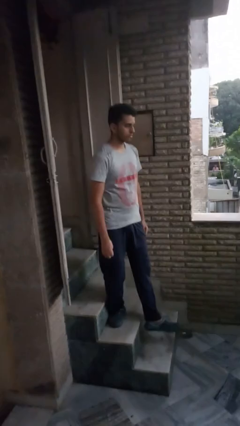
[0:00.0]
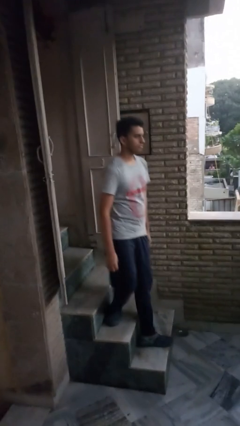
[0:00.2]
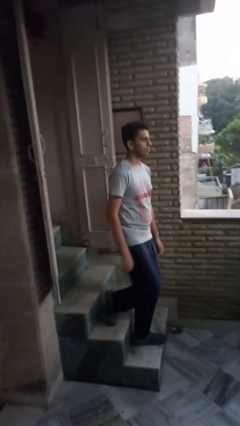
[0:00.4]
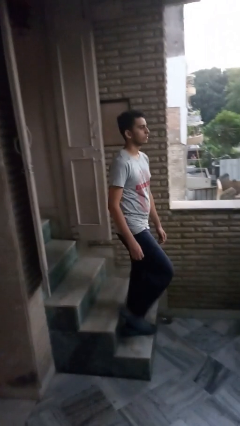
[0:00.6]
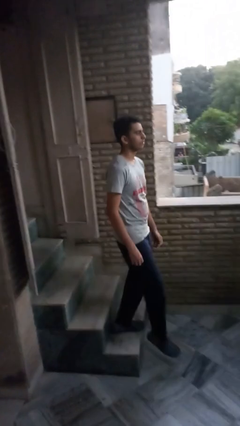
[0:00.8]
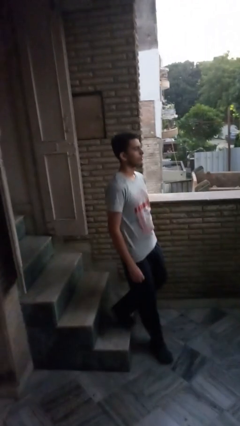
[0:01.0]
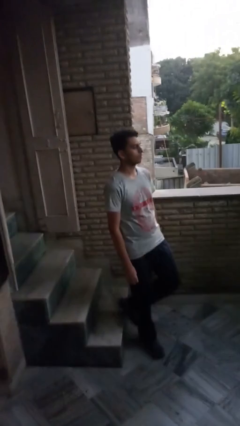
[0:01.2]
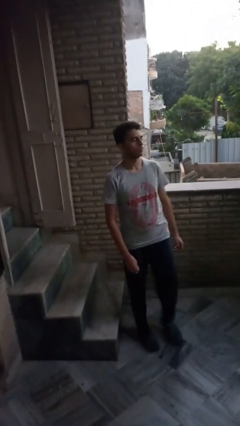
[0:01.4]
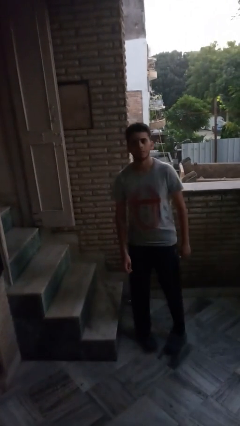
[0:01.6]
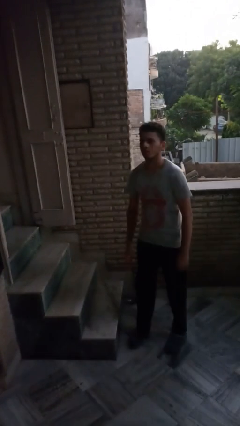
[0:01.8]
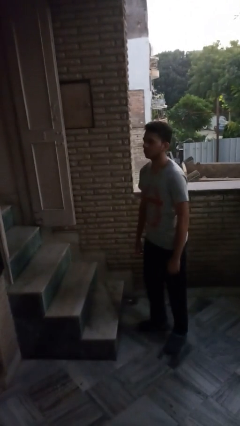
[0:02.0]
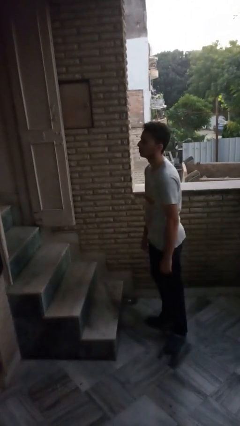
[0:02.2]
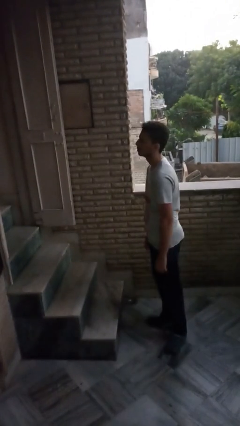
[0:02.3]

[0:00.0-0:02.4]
person climbs down stairs

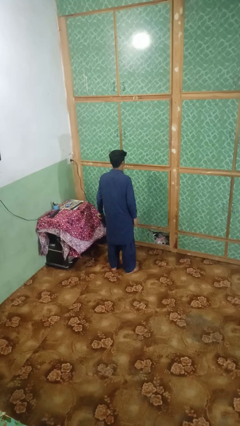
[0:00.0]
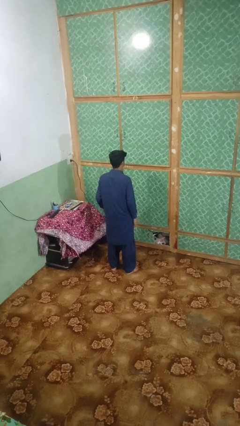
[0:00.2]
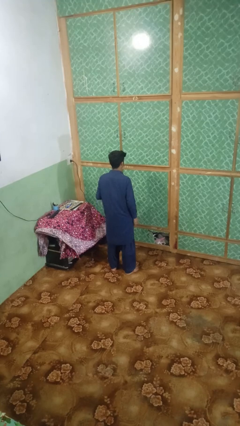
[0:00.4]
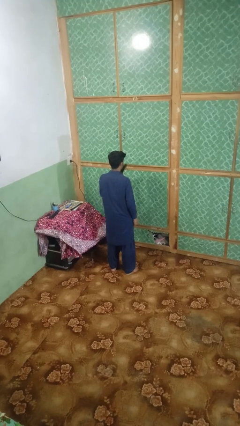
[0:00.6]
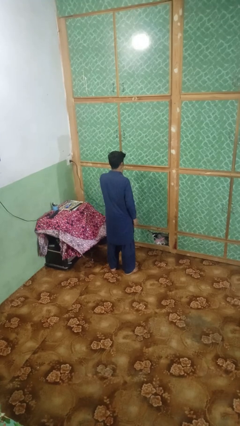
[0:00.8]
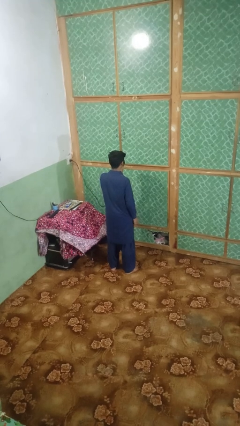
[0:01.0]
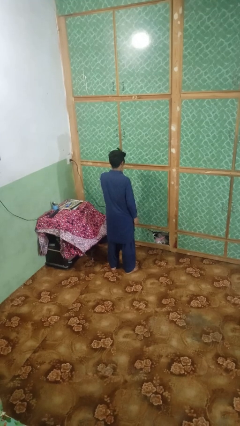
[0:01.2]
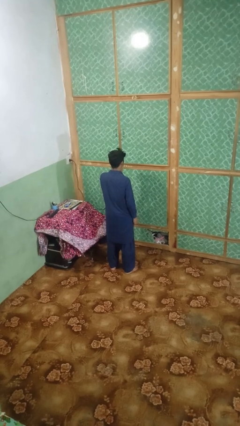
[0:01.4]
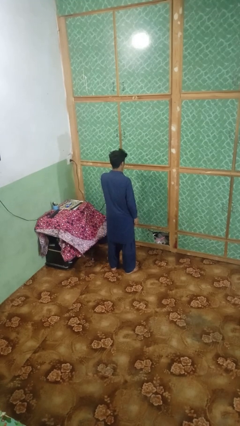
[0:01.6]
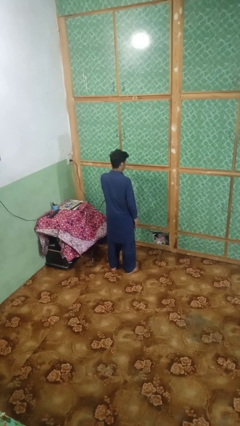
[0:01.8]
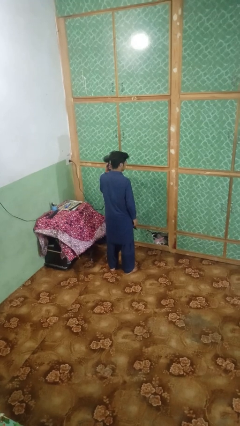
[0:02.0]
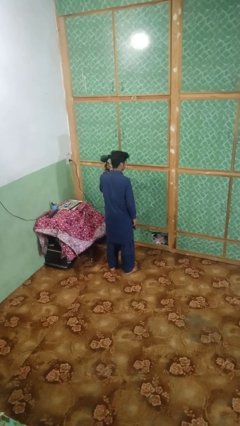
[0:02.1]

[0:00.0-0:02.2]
person dries hair with hairdryer

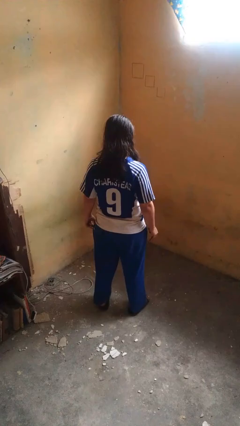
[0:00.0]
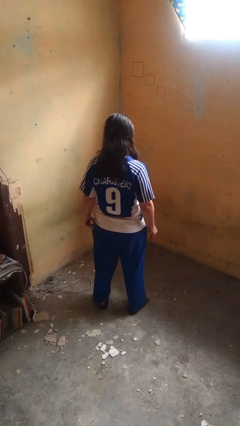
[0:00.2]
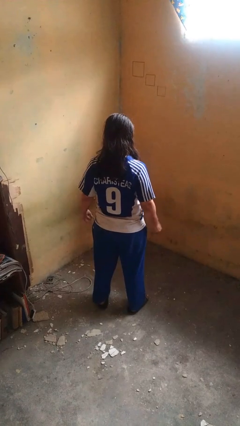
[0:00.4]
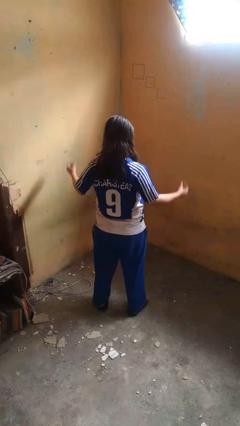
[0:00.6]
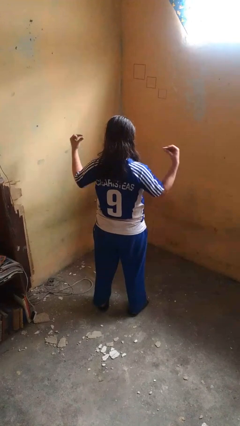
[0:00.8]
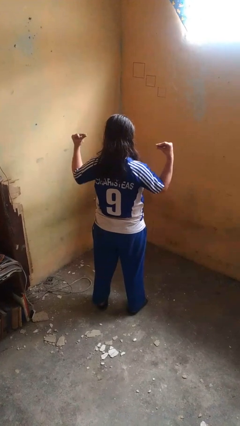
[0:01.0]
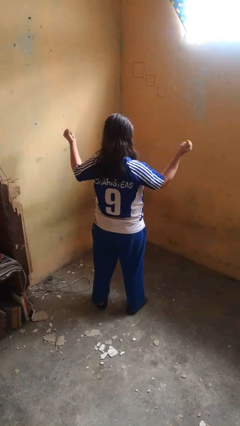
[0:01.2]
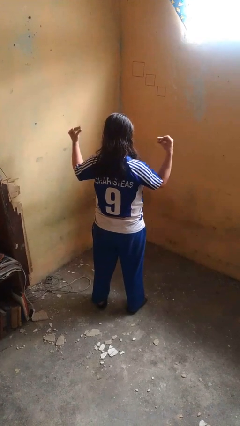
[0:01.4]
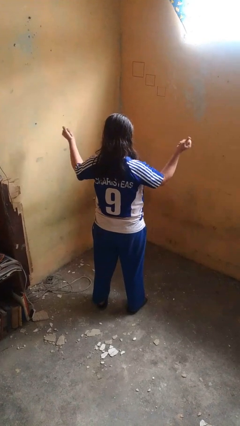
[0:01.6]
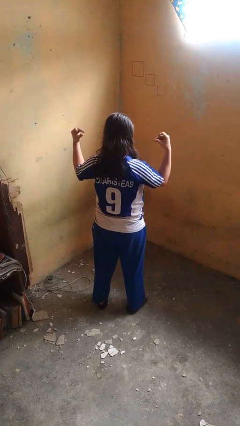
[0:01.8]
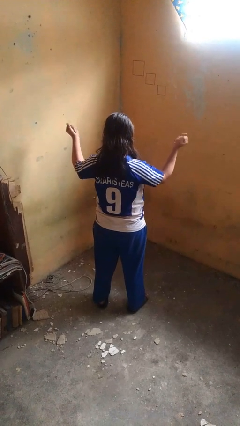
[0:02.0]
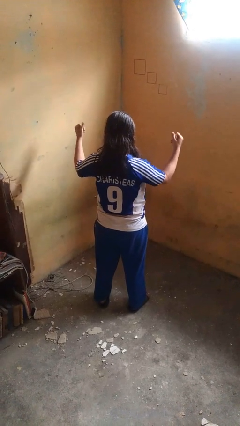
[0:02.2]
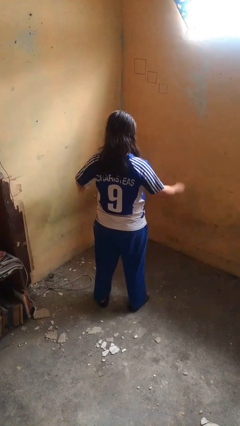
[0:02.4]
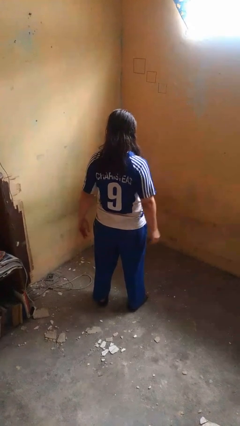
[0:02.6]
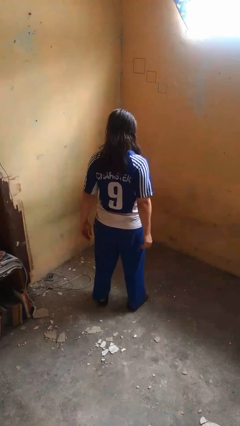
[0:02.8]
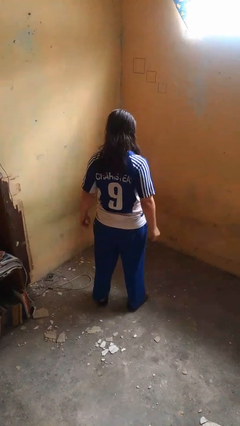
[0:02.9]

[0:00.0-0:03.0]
person snaps fingers

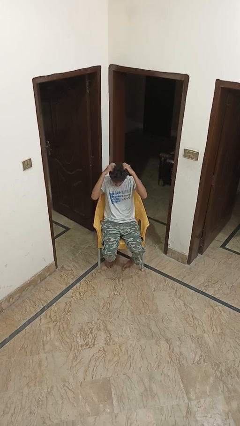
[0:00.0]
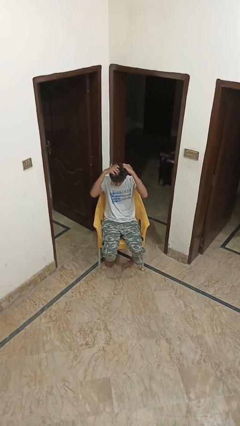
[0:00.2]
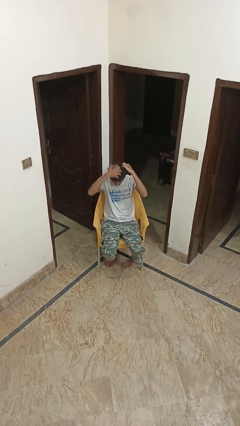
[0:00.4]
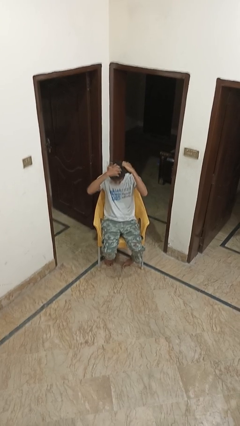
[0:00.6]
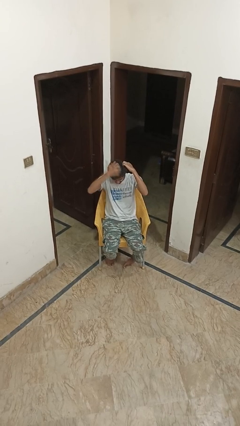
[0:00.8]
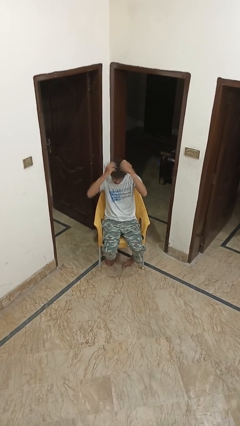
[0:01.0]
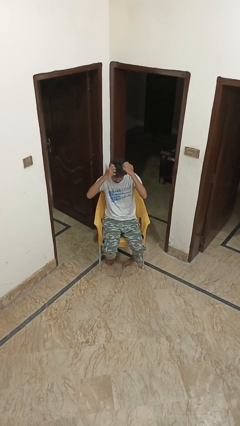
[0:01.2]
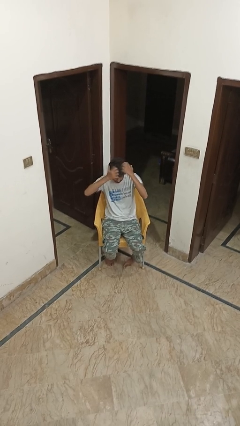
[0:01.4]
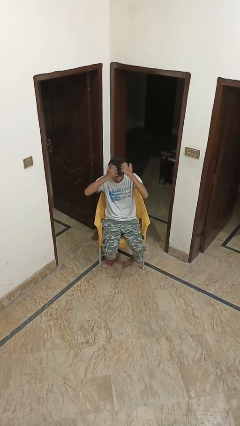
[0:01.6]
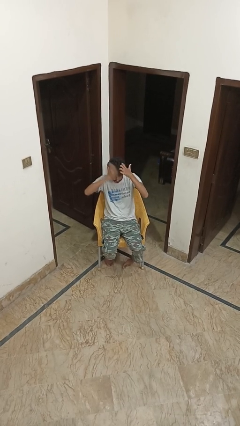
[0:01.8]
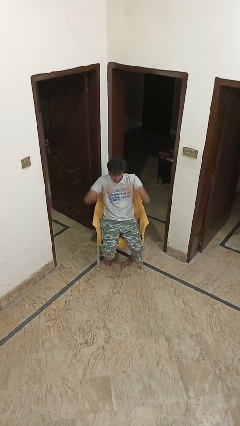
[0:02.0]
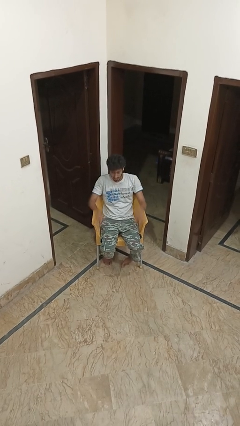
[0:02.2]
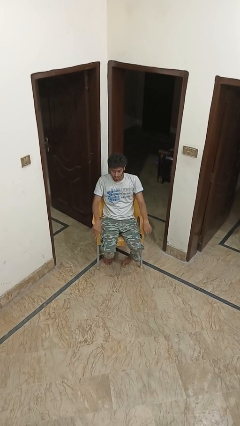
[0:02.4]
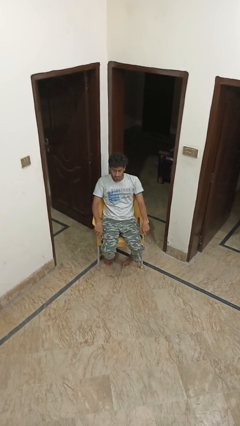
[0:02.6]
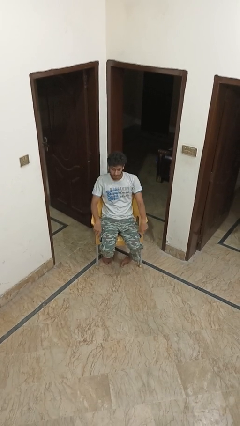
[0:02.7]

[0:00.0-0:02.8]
person scratches face

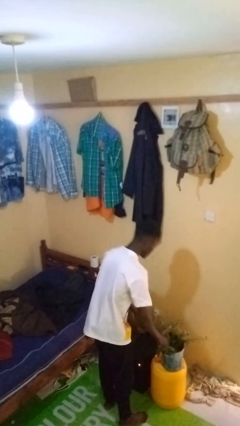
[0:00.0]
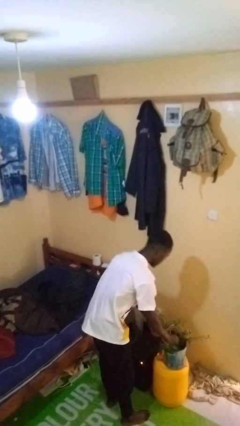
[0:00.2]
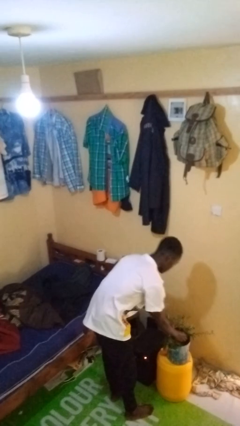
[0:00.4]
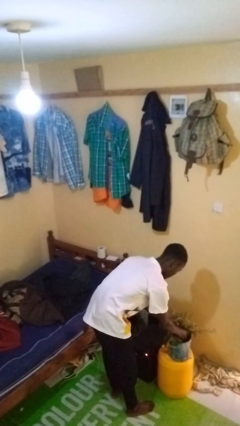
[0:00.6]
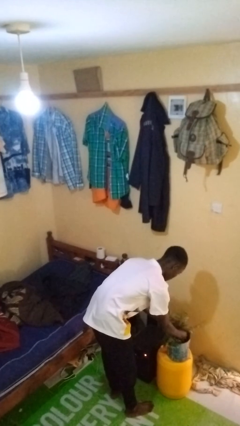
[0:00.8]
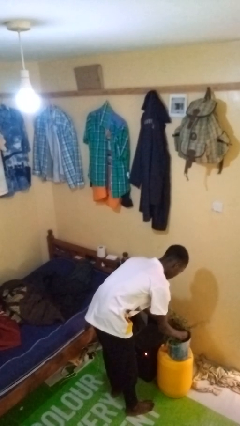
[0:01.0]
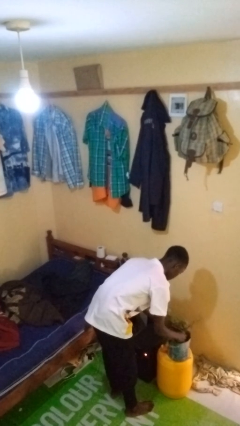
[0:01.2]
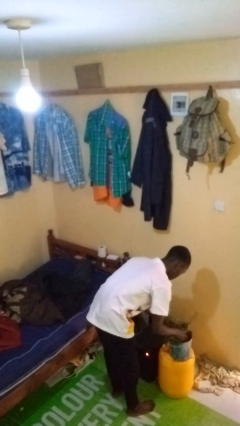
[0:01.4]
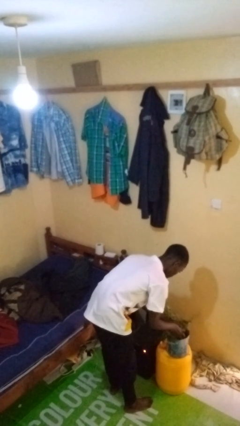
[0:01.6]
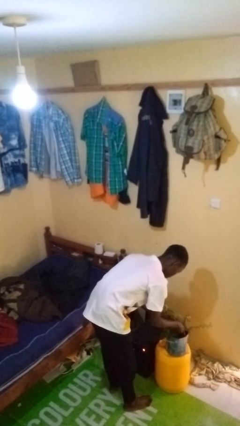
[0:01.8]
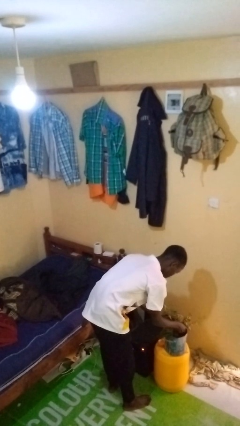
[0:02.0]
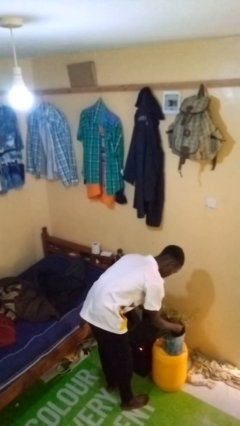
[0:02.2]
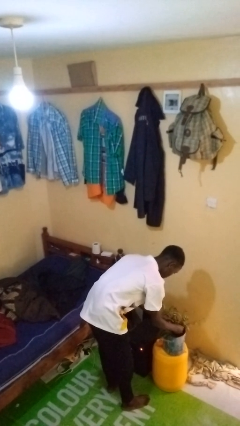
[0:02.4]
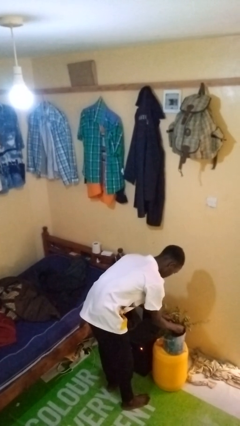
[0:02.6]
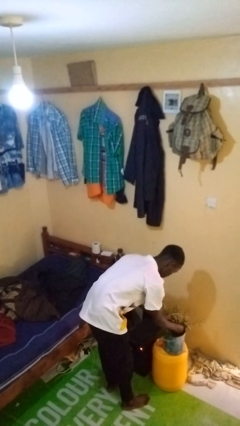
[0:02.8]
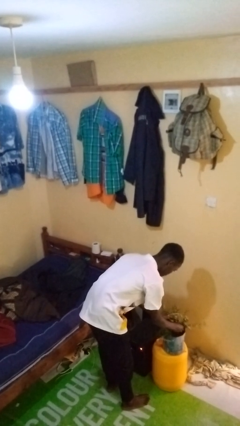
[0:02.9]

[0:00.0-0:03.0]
person arranges flowers in vase

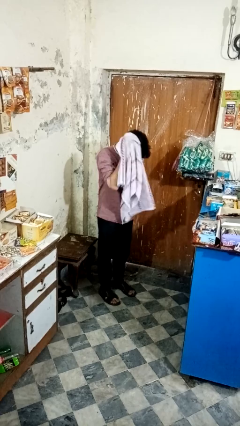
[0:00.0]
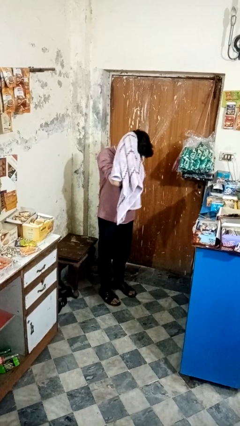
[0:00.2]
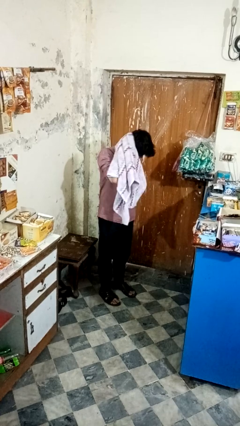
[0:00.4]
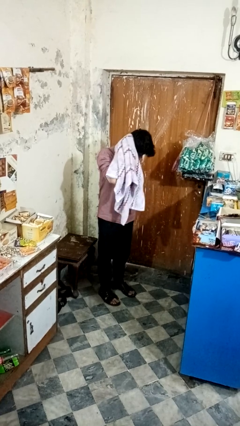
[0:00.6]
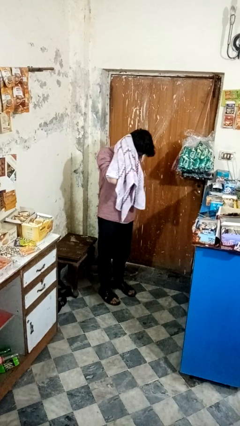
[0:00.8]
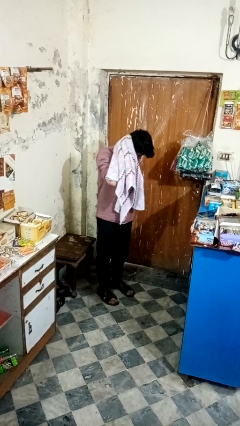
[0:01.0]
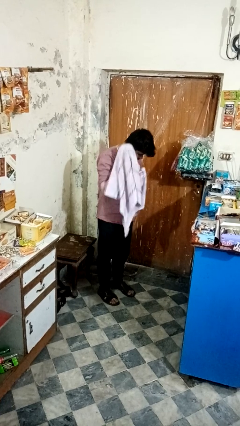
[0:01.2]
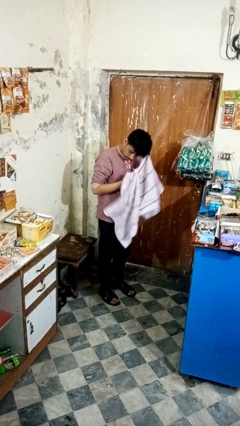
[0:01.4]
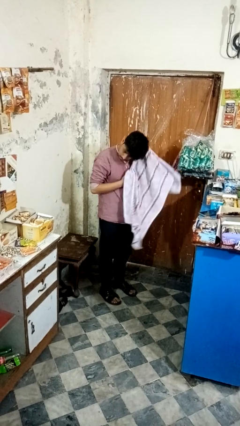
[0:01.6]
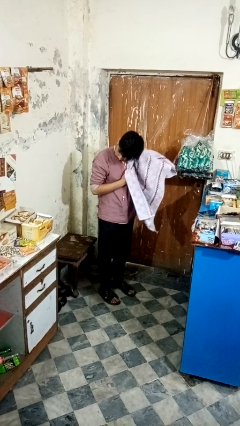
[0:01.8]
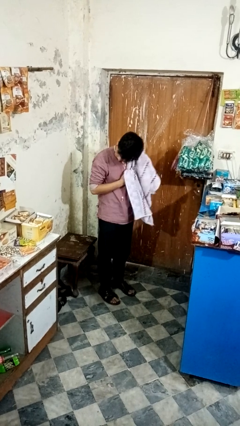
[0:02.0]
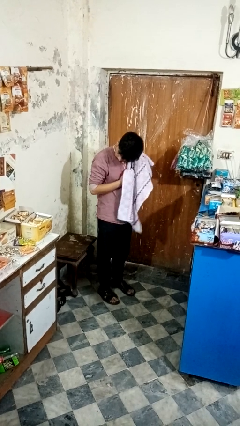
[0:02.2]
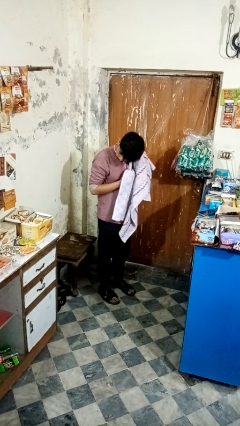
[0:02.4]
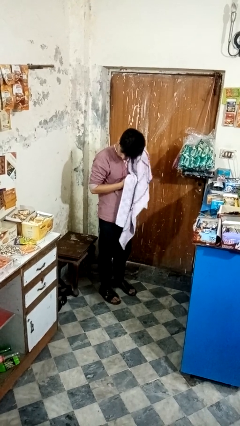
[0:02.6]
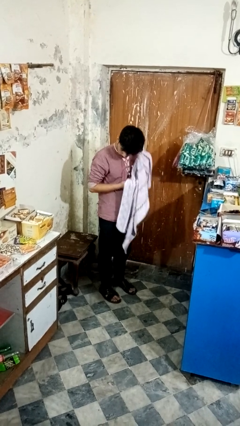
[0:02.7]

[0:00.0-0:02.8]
person dries hair with towel

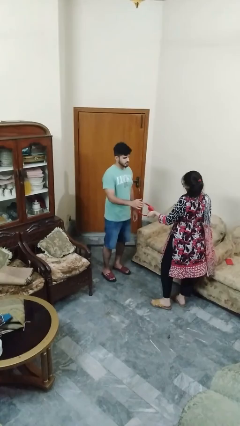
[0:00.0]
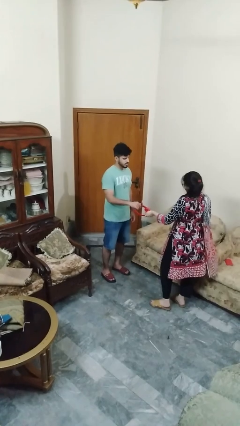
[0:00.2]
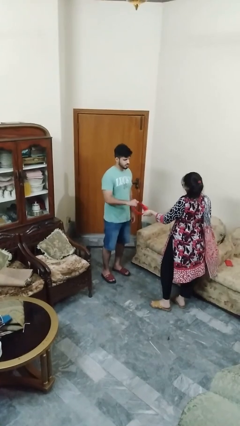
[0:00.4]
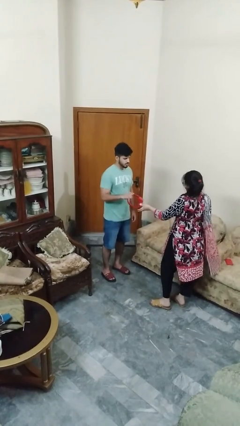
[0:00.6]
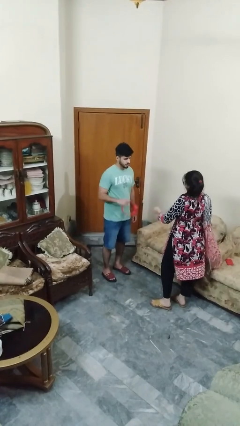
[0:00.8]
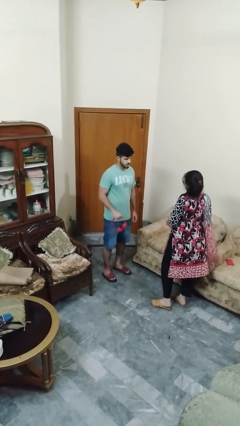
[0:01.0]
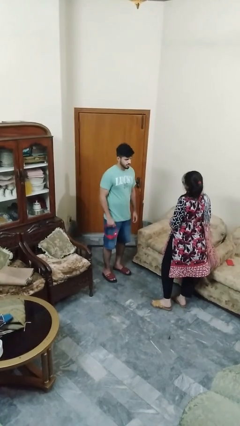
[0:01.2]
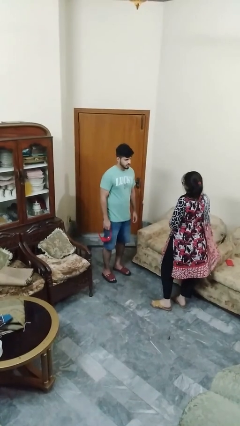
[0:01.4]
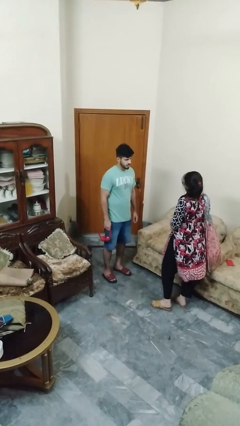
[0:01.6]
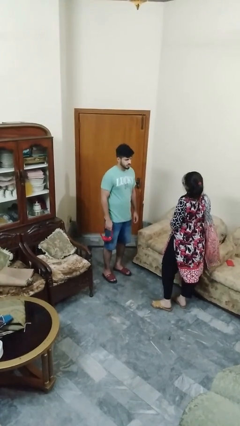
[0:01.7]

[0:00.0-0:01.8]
person transfers object to person
